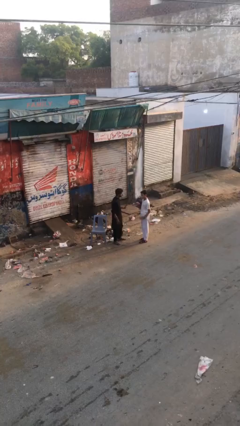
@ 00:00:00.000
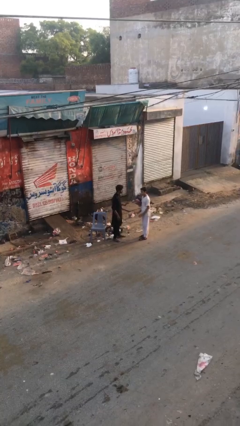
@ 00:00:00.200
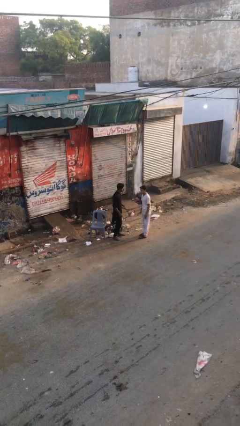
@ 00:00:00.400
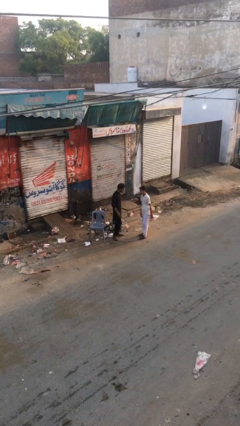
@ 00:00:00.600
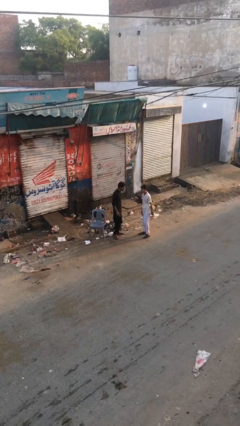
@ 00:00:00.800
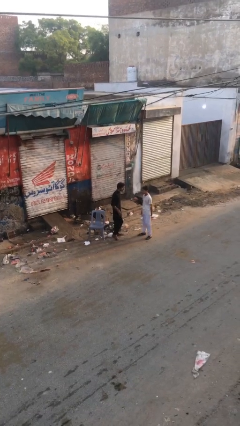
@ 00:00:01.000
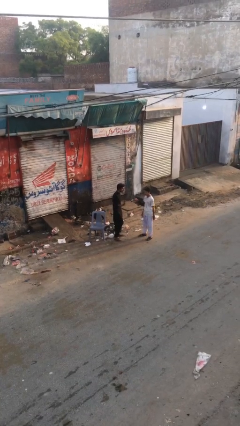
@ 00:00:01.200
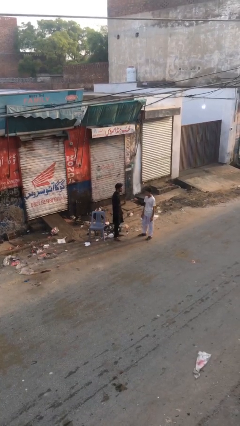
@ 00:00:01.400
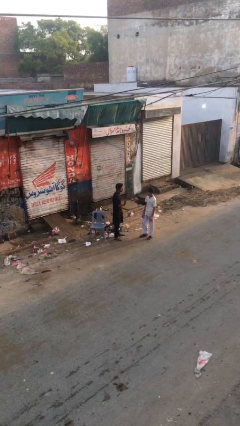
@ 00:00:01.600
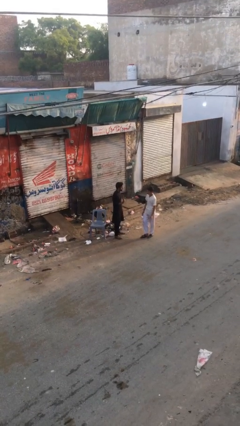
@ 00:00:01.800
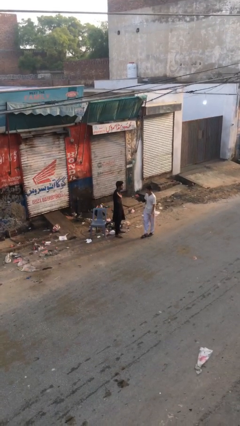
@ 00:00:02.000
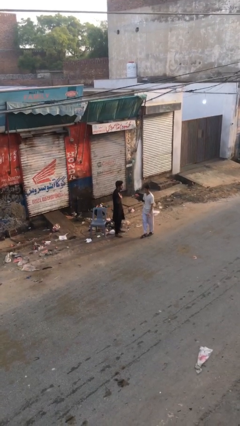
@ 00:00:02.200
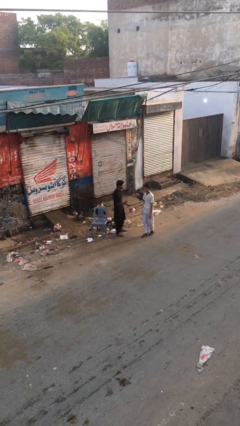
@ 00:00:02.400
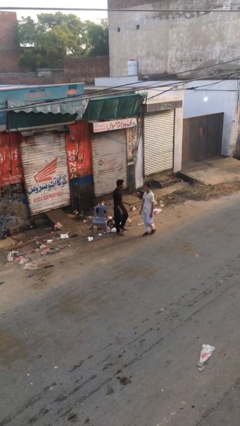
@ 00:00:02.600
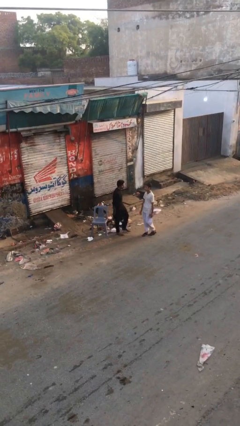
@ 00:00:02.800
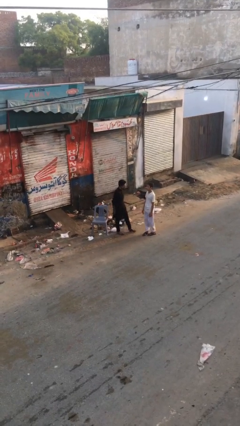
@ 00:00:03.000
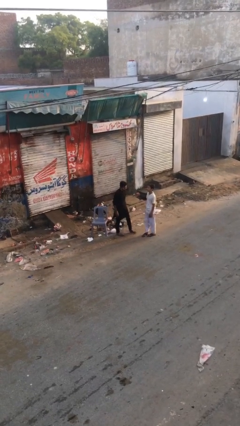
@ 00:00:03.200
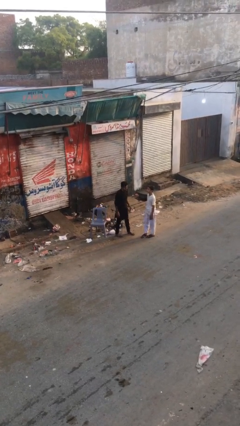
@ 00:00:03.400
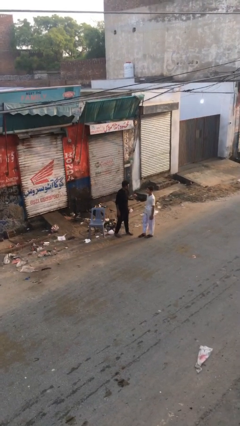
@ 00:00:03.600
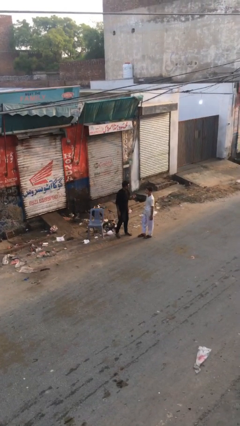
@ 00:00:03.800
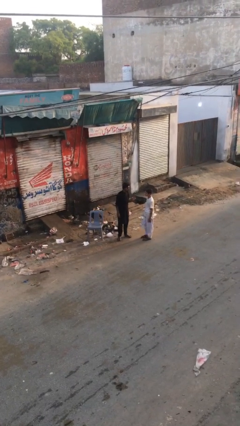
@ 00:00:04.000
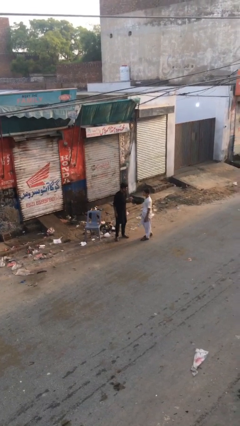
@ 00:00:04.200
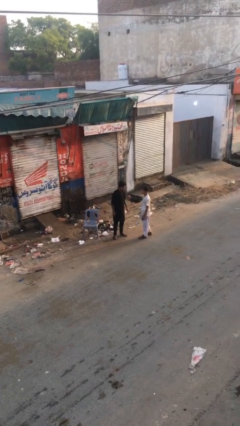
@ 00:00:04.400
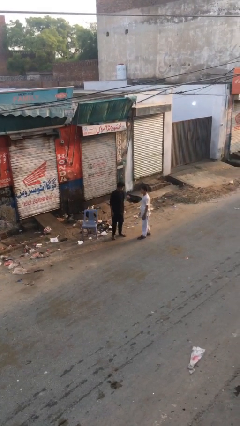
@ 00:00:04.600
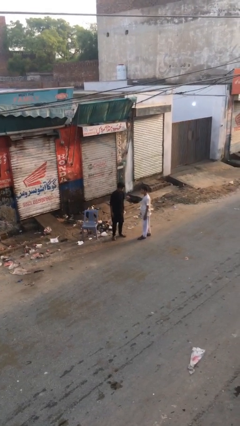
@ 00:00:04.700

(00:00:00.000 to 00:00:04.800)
person talks to person

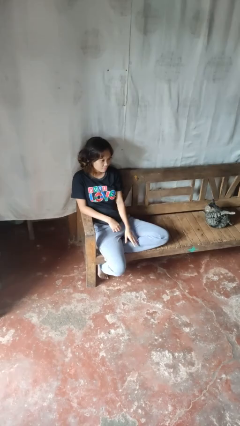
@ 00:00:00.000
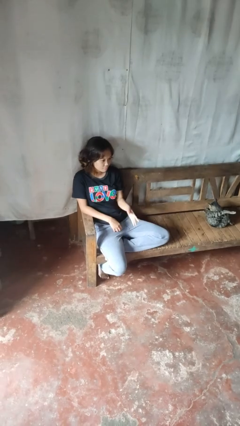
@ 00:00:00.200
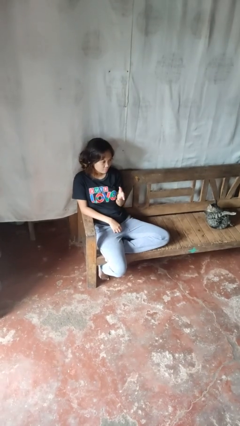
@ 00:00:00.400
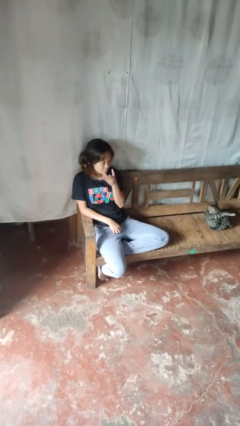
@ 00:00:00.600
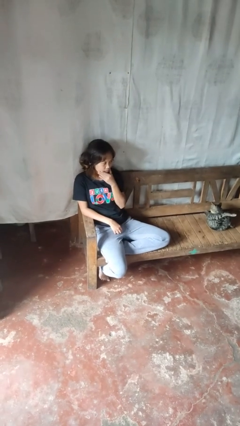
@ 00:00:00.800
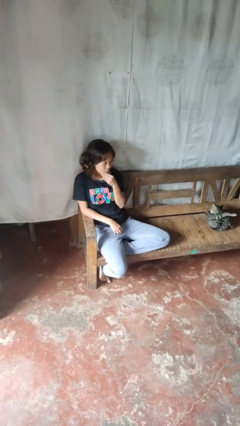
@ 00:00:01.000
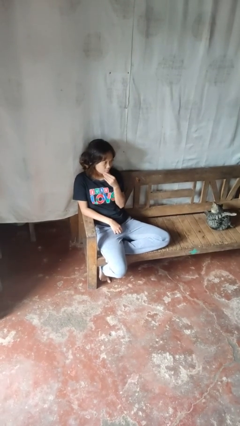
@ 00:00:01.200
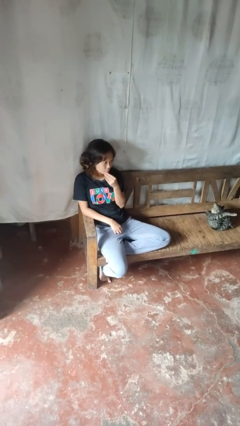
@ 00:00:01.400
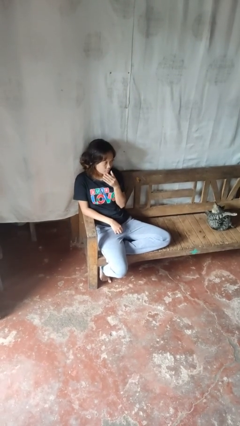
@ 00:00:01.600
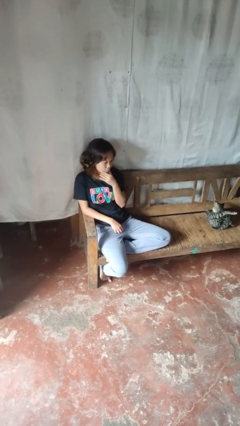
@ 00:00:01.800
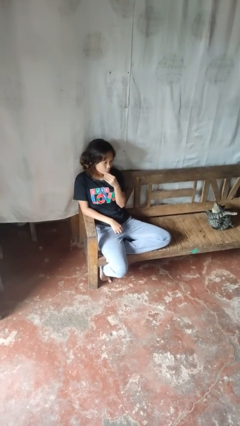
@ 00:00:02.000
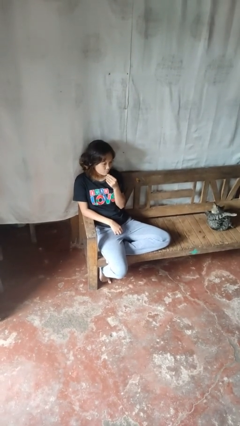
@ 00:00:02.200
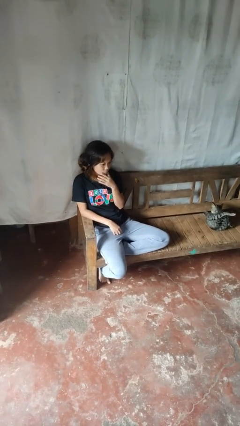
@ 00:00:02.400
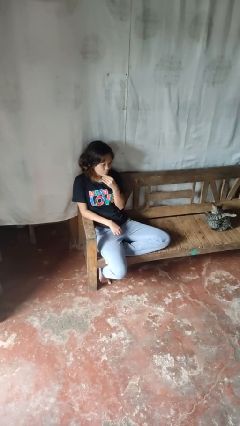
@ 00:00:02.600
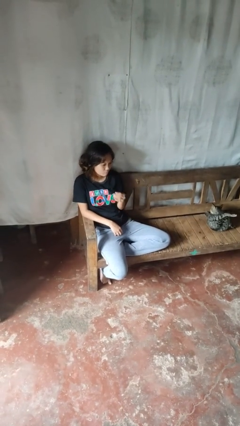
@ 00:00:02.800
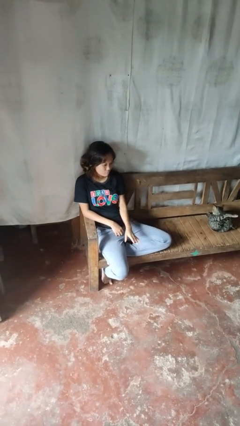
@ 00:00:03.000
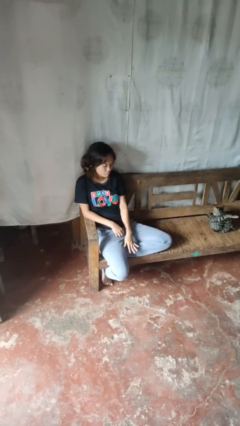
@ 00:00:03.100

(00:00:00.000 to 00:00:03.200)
person strokes chin

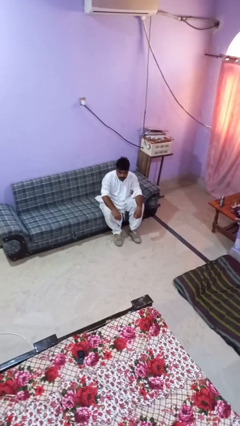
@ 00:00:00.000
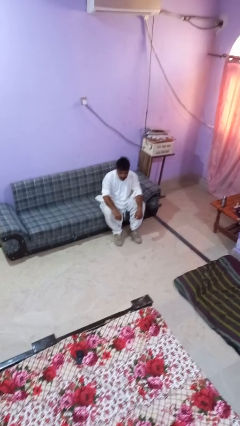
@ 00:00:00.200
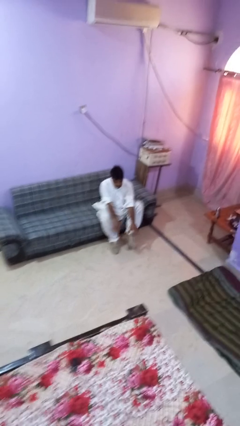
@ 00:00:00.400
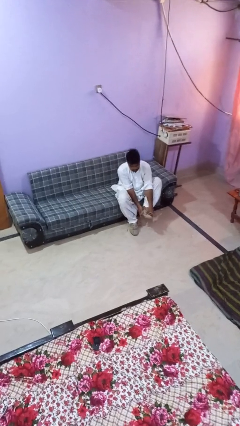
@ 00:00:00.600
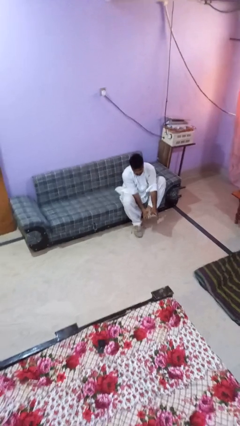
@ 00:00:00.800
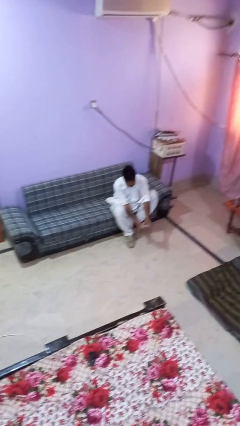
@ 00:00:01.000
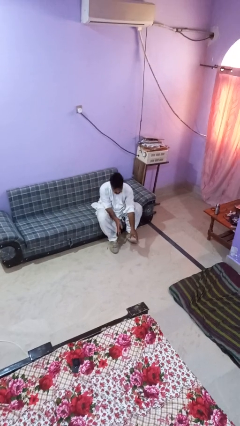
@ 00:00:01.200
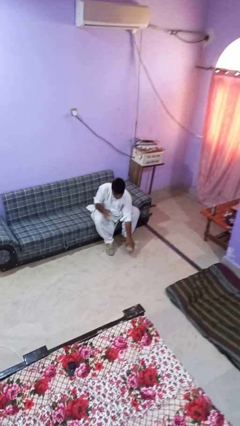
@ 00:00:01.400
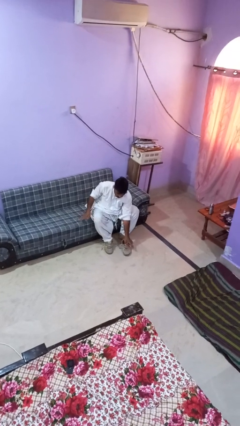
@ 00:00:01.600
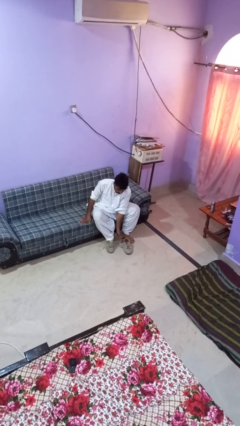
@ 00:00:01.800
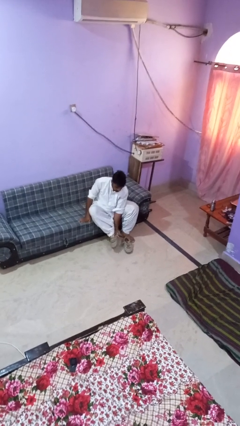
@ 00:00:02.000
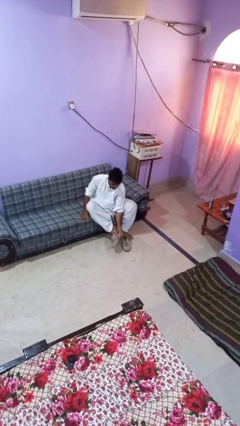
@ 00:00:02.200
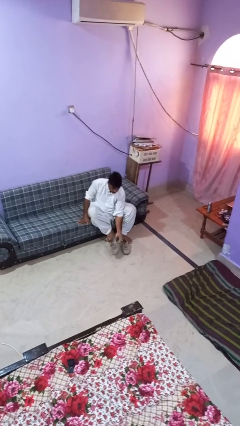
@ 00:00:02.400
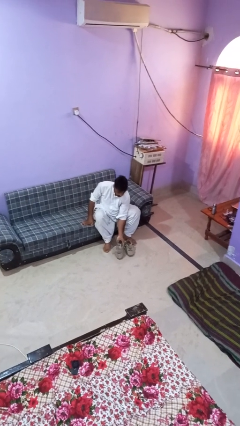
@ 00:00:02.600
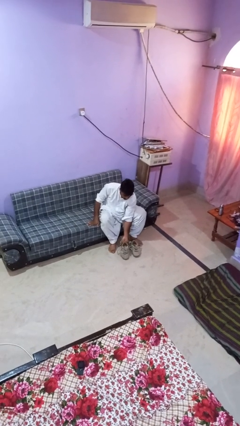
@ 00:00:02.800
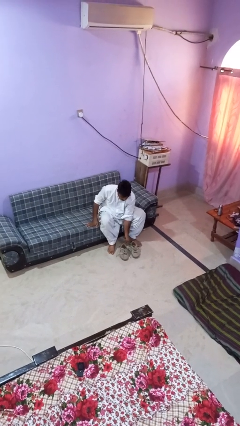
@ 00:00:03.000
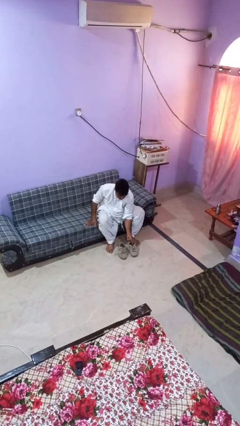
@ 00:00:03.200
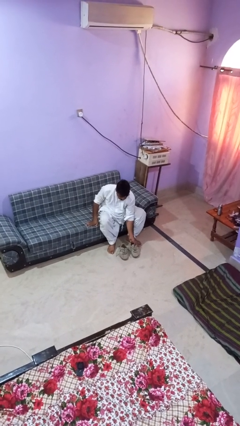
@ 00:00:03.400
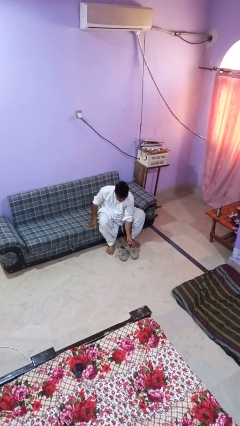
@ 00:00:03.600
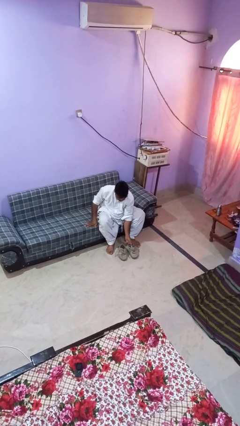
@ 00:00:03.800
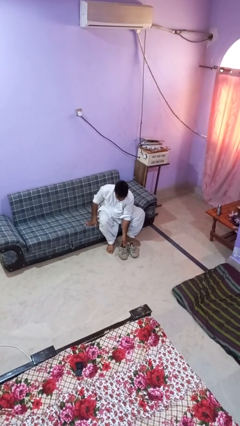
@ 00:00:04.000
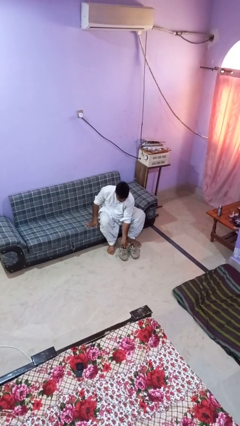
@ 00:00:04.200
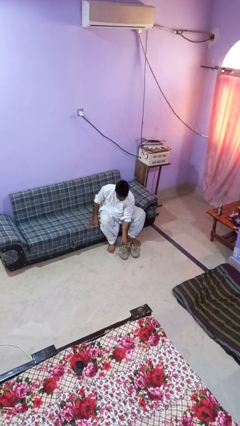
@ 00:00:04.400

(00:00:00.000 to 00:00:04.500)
person takes off boots

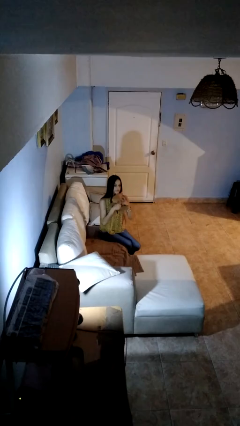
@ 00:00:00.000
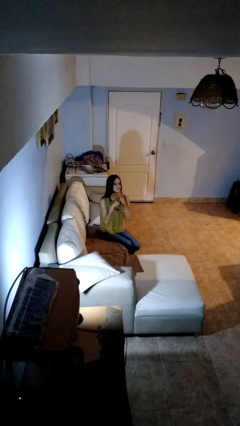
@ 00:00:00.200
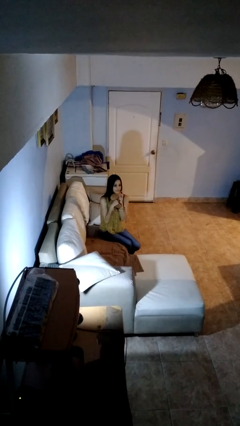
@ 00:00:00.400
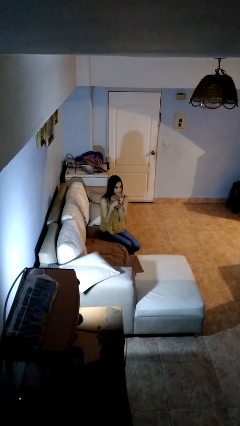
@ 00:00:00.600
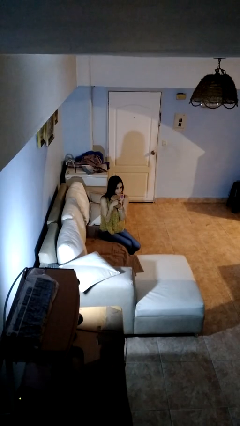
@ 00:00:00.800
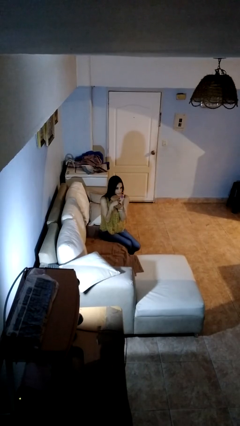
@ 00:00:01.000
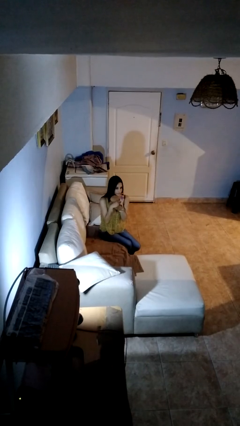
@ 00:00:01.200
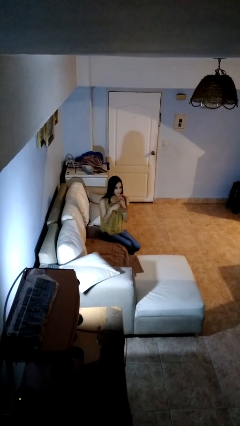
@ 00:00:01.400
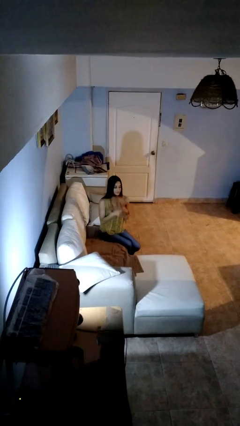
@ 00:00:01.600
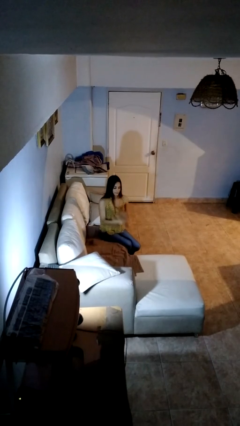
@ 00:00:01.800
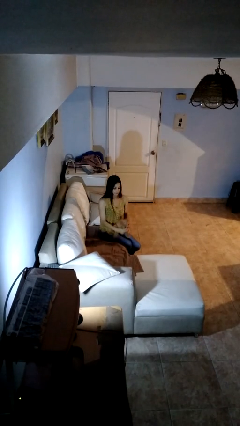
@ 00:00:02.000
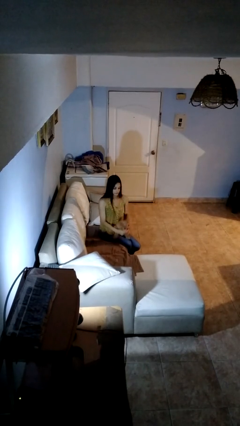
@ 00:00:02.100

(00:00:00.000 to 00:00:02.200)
person hugs stuffed animal

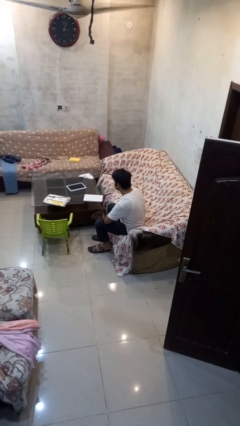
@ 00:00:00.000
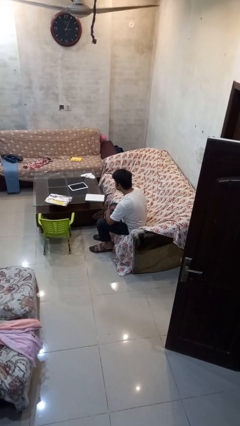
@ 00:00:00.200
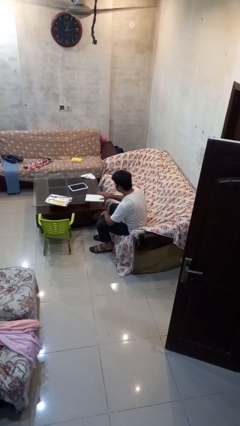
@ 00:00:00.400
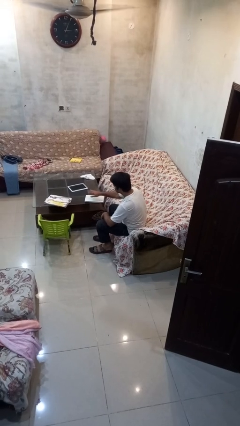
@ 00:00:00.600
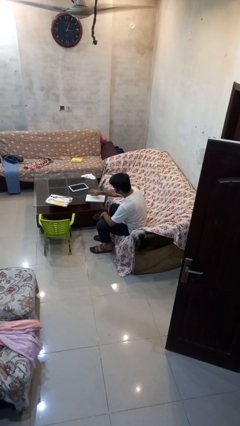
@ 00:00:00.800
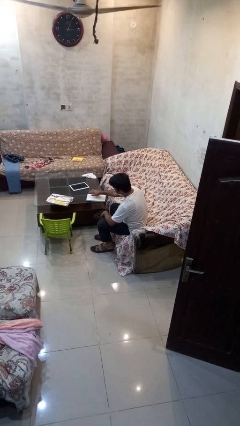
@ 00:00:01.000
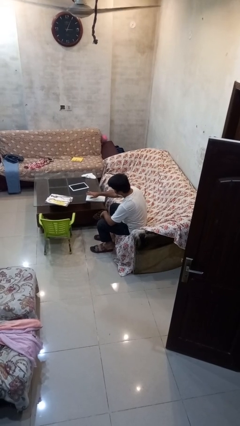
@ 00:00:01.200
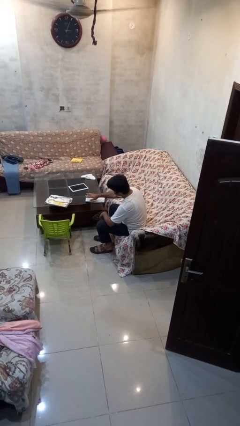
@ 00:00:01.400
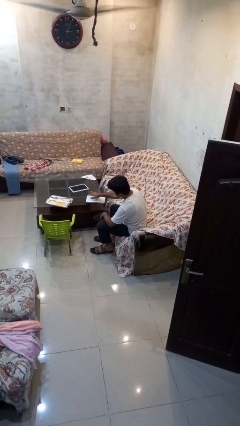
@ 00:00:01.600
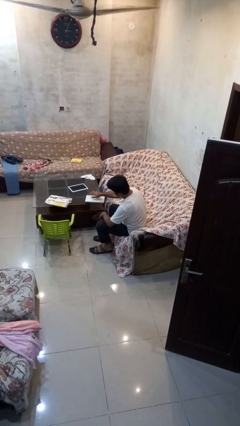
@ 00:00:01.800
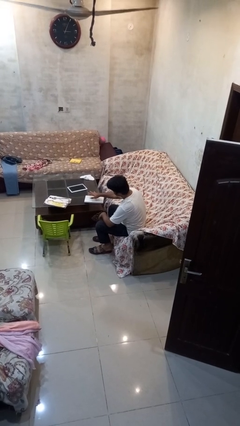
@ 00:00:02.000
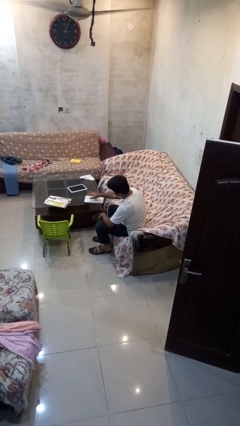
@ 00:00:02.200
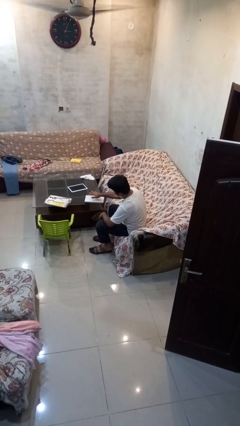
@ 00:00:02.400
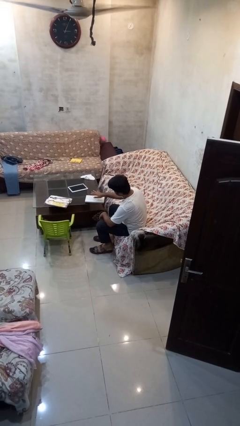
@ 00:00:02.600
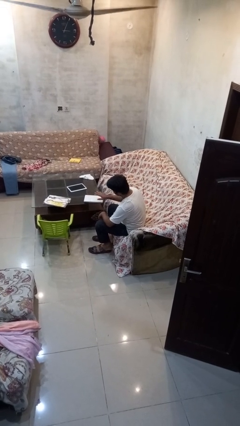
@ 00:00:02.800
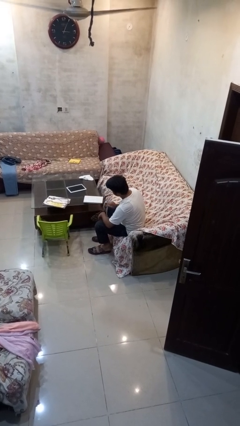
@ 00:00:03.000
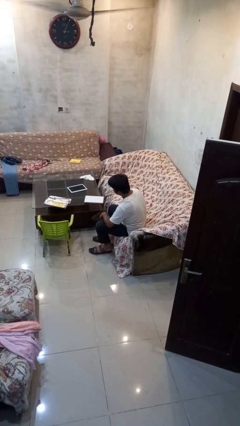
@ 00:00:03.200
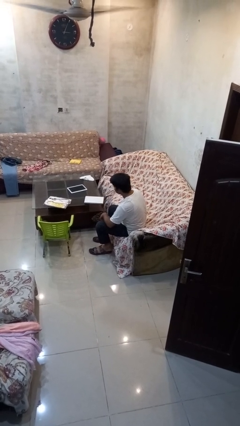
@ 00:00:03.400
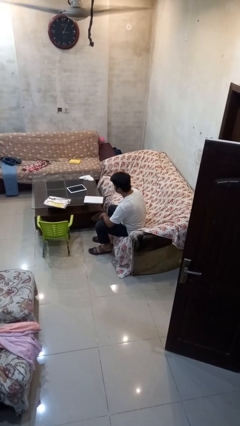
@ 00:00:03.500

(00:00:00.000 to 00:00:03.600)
person waves hand over object
